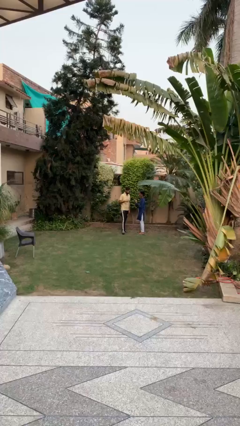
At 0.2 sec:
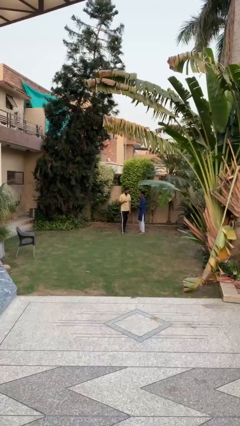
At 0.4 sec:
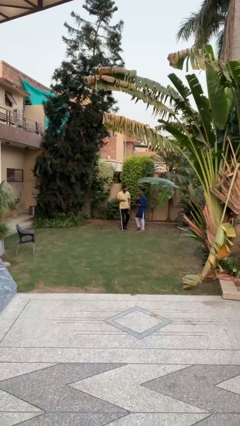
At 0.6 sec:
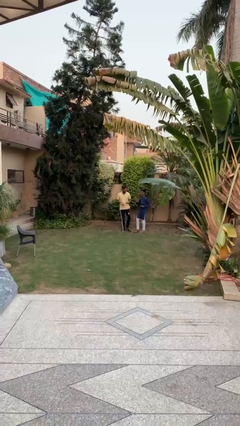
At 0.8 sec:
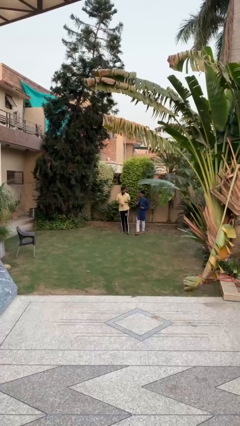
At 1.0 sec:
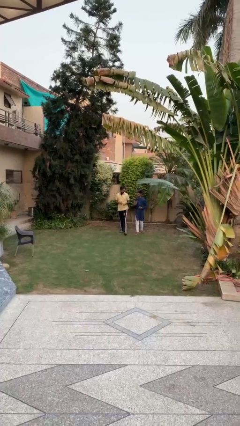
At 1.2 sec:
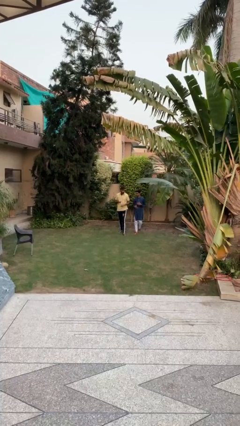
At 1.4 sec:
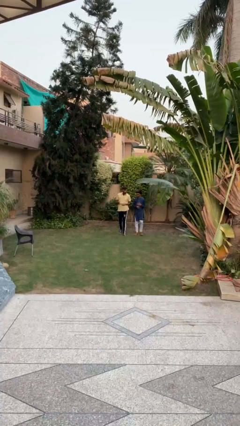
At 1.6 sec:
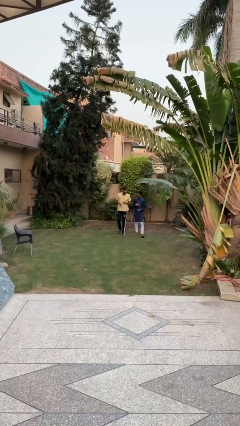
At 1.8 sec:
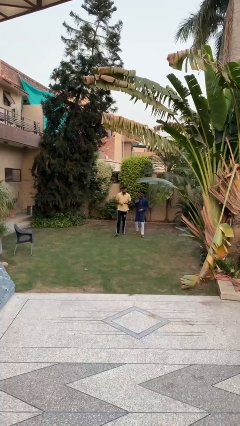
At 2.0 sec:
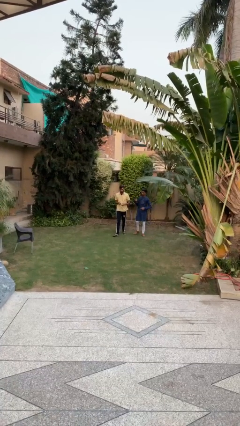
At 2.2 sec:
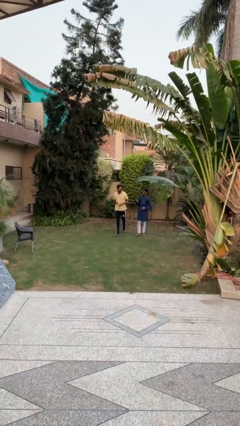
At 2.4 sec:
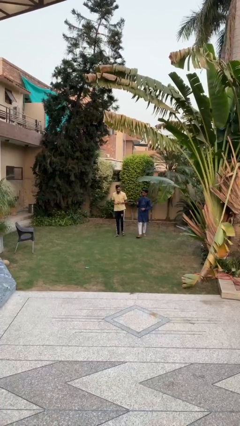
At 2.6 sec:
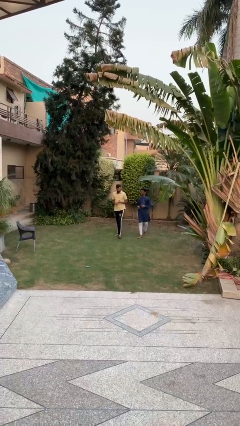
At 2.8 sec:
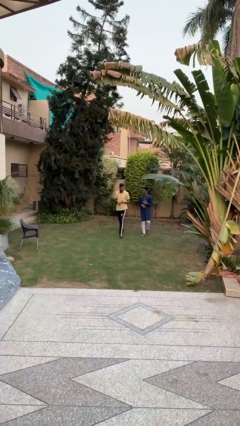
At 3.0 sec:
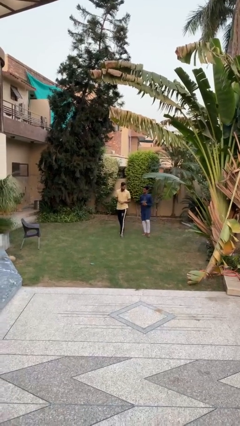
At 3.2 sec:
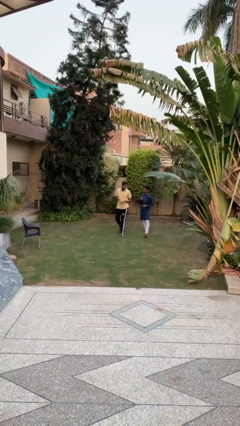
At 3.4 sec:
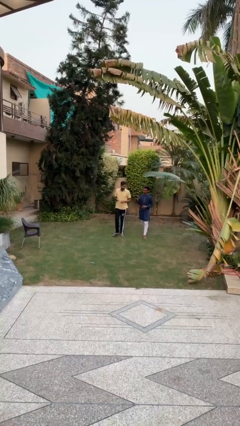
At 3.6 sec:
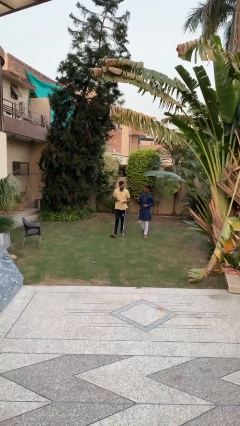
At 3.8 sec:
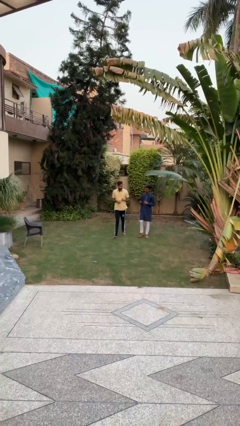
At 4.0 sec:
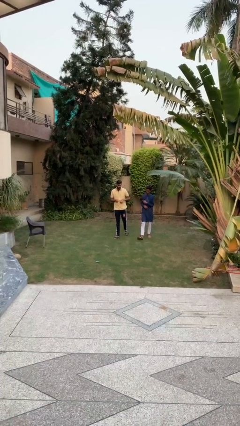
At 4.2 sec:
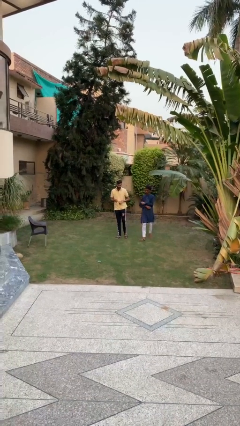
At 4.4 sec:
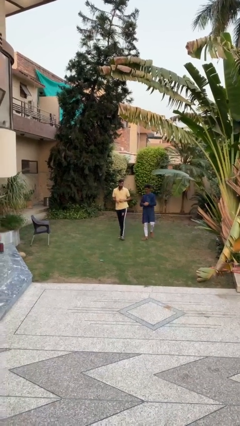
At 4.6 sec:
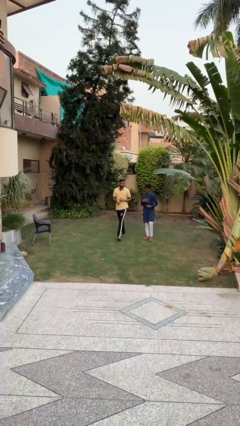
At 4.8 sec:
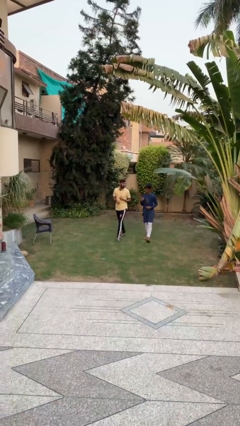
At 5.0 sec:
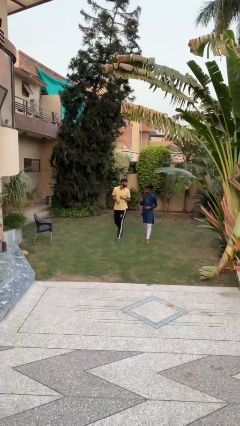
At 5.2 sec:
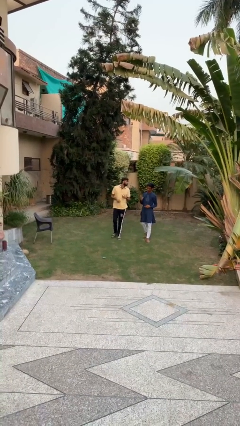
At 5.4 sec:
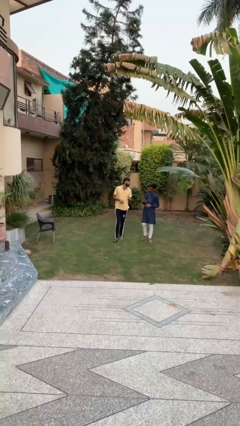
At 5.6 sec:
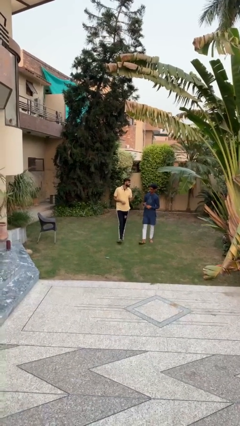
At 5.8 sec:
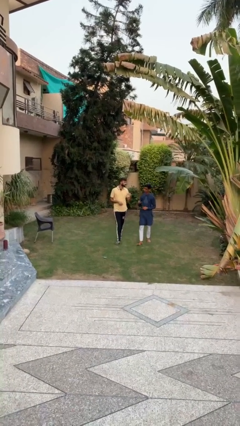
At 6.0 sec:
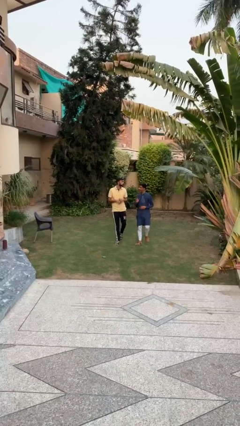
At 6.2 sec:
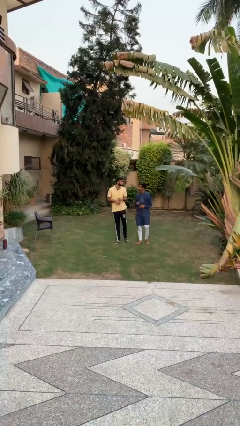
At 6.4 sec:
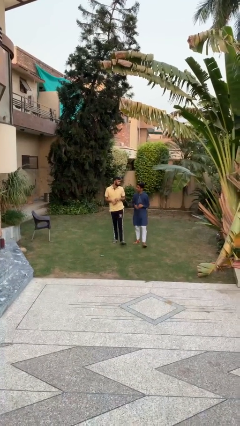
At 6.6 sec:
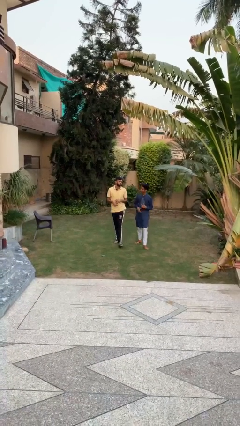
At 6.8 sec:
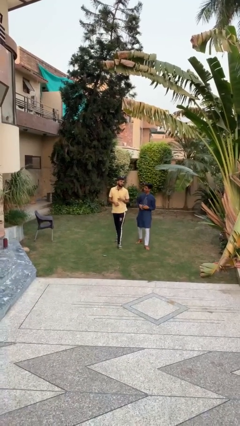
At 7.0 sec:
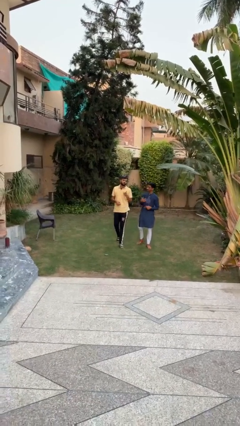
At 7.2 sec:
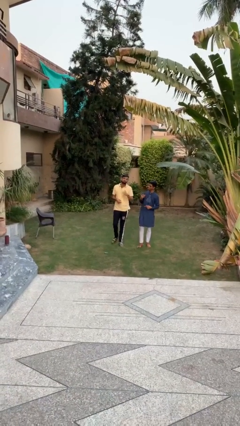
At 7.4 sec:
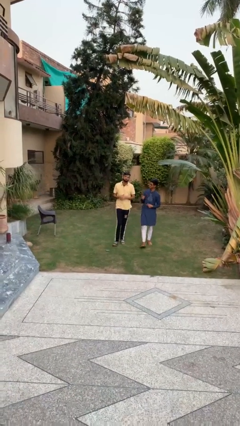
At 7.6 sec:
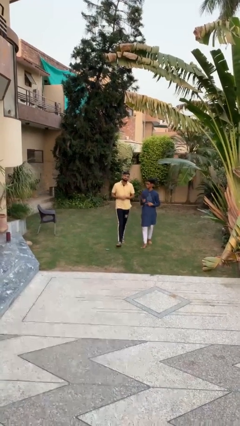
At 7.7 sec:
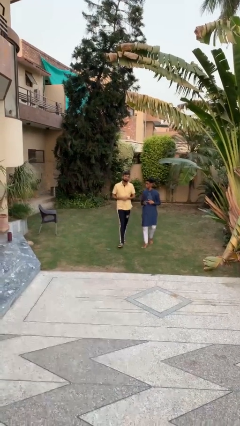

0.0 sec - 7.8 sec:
person talks to person

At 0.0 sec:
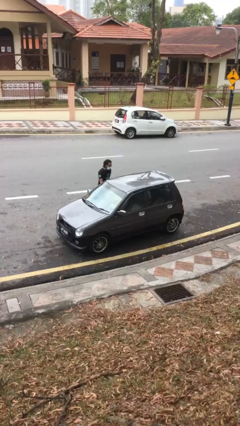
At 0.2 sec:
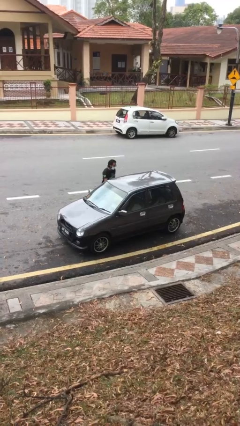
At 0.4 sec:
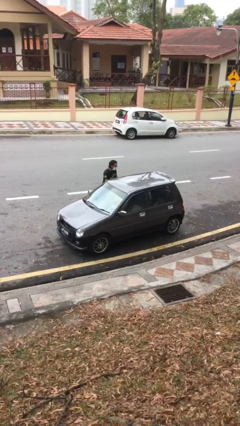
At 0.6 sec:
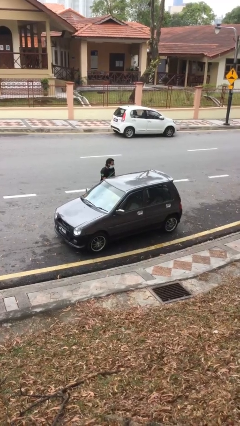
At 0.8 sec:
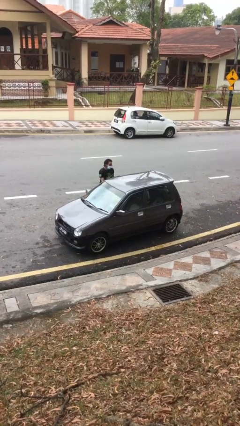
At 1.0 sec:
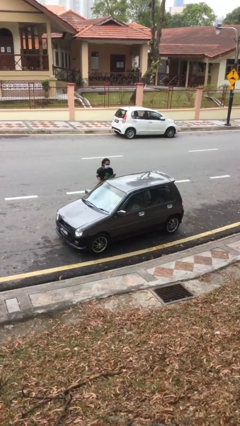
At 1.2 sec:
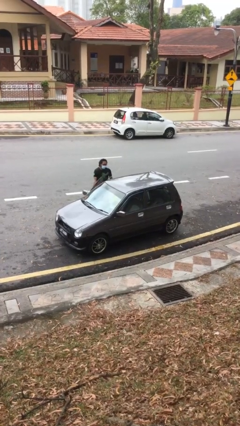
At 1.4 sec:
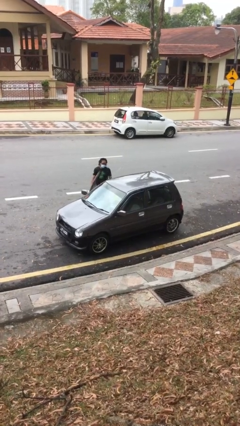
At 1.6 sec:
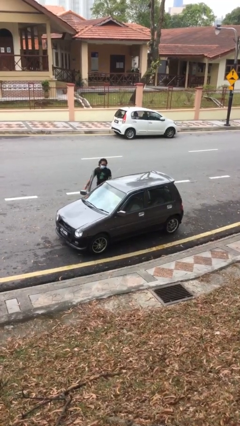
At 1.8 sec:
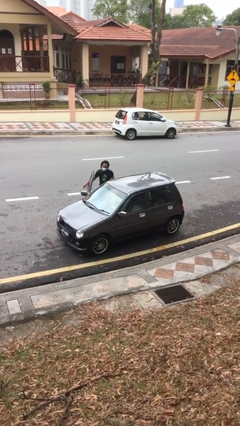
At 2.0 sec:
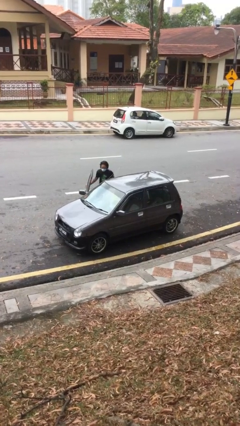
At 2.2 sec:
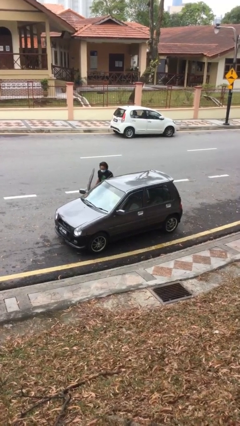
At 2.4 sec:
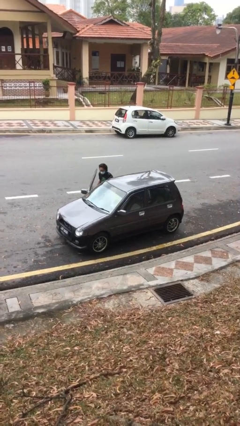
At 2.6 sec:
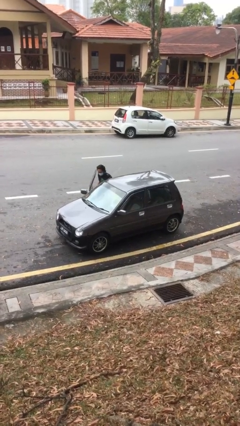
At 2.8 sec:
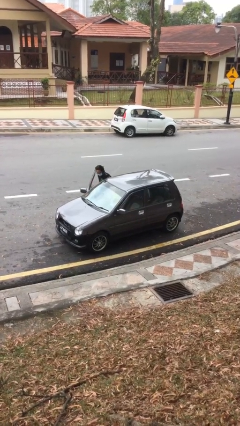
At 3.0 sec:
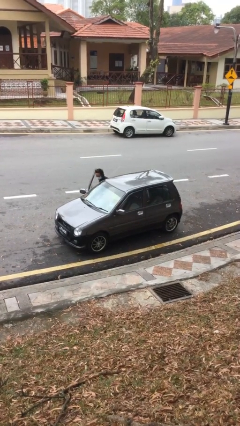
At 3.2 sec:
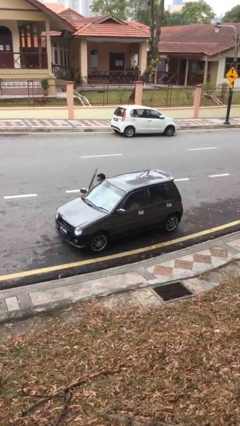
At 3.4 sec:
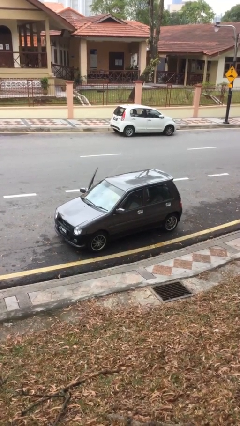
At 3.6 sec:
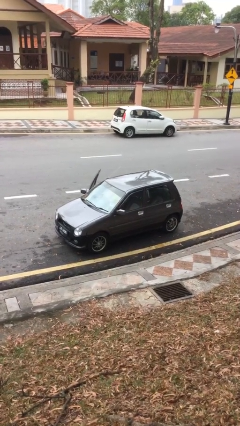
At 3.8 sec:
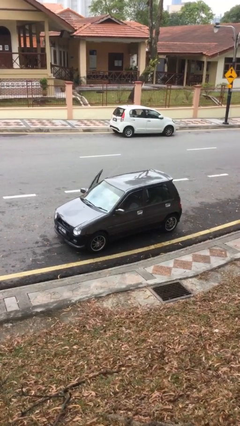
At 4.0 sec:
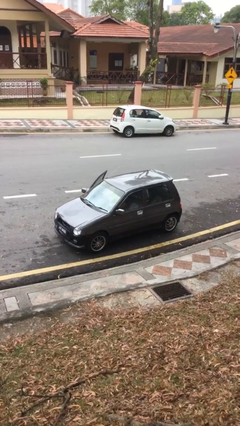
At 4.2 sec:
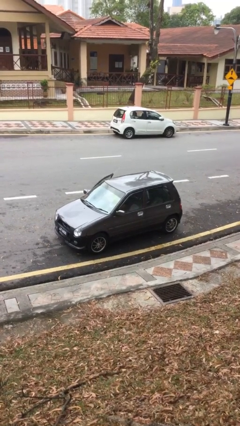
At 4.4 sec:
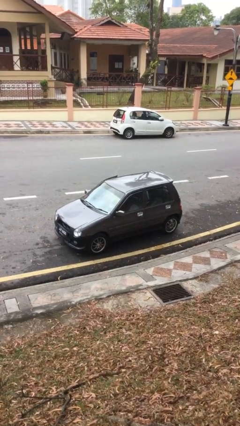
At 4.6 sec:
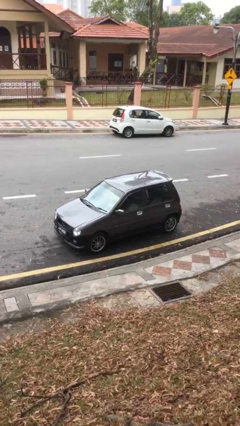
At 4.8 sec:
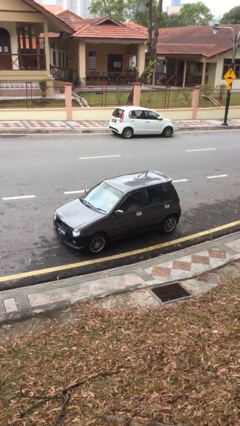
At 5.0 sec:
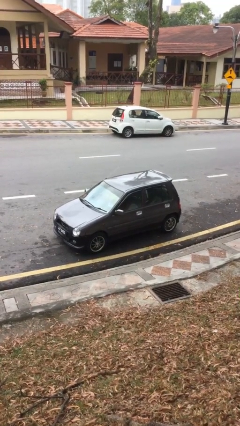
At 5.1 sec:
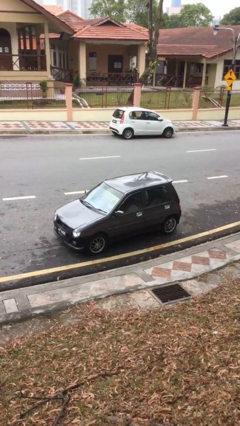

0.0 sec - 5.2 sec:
car picks up person

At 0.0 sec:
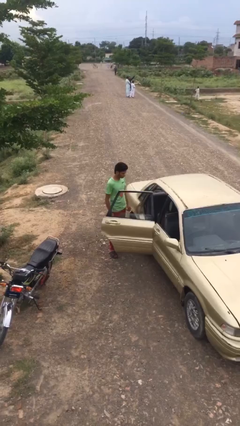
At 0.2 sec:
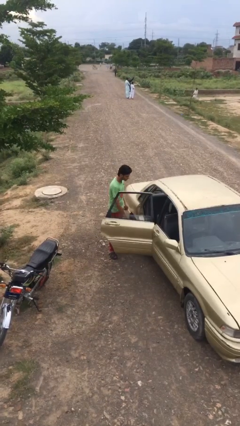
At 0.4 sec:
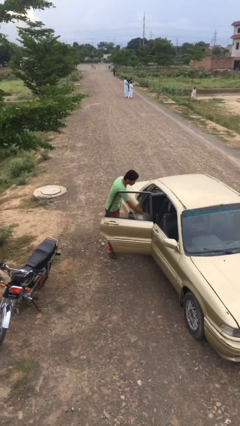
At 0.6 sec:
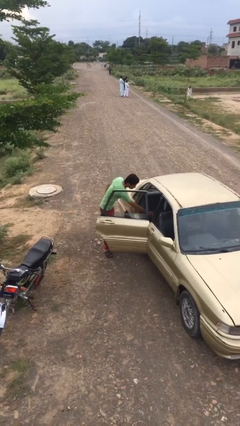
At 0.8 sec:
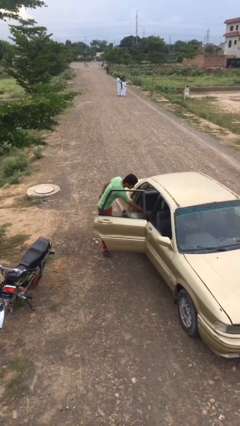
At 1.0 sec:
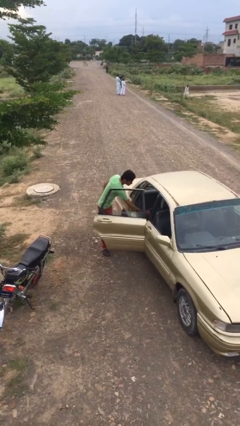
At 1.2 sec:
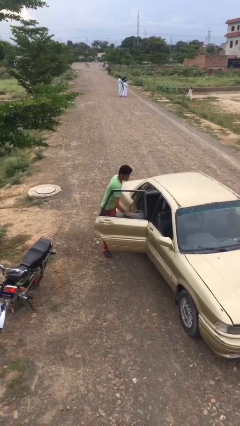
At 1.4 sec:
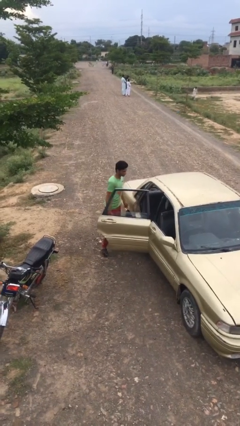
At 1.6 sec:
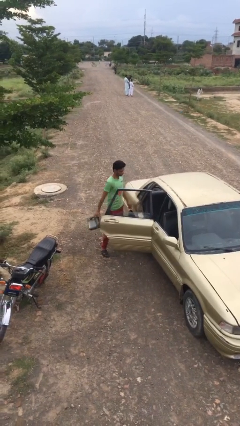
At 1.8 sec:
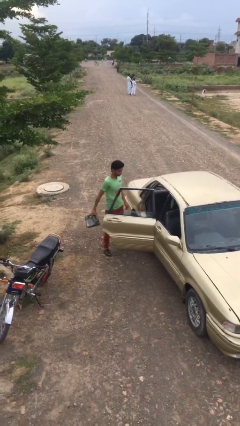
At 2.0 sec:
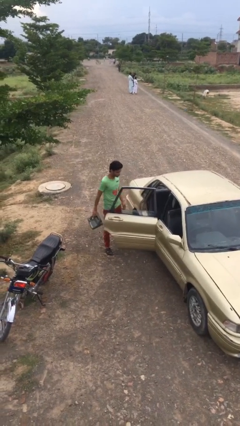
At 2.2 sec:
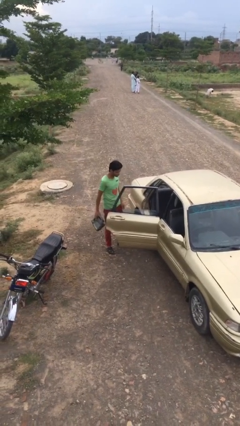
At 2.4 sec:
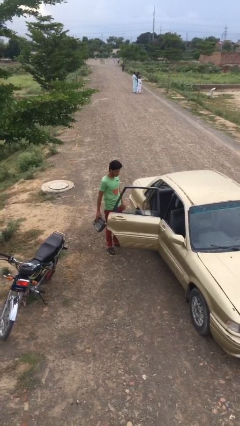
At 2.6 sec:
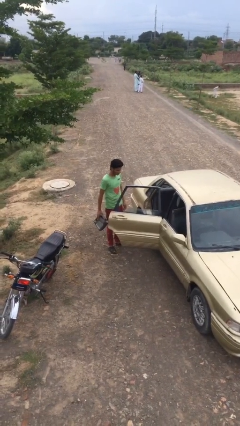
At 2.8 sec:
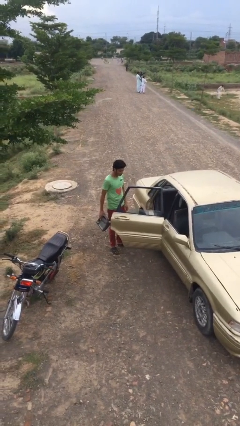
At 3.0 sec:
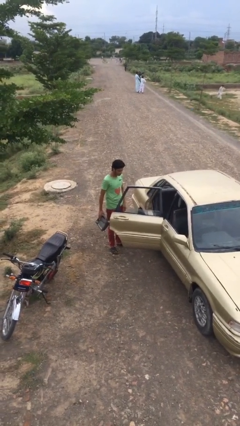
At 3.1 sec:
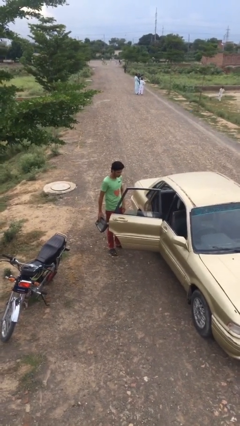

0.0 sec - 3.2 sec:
person unloads car

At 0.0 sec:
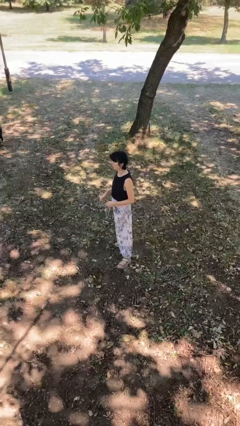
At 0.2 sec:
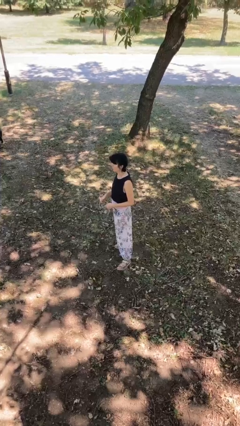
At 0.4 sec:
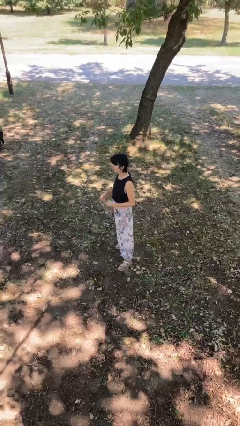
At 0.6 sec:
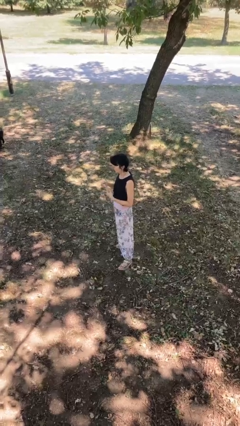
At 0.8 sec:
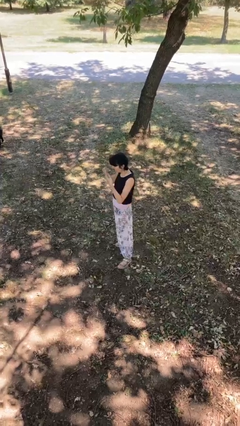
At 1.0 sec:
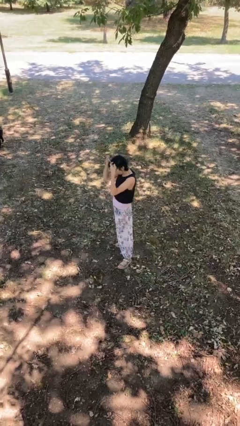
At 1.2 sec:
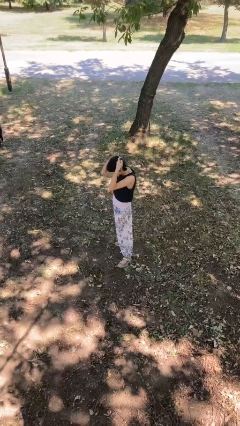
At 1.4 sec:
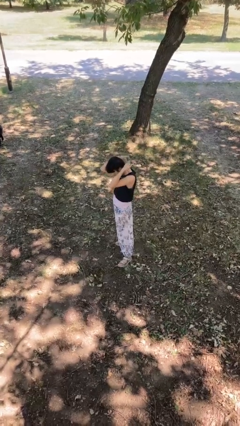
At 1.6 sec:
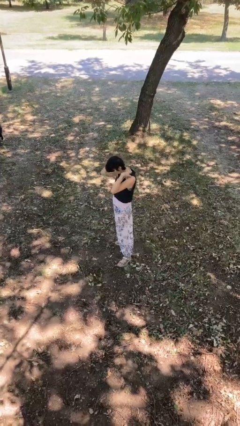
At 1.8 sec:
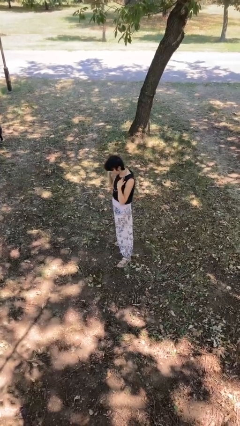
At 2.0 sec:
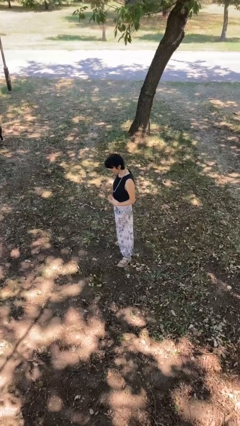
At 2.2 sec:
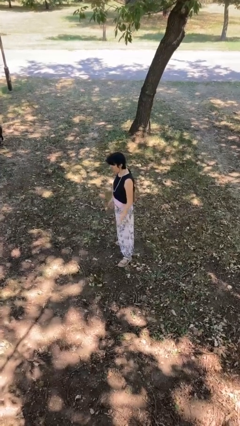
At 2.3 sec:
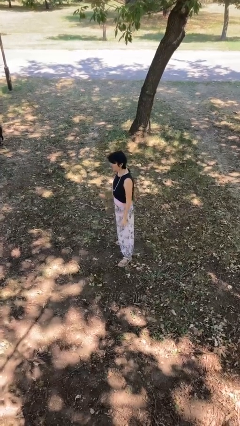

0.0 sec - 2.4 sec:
person puts on necklace
